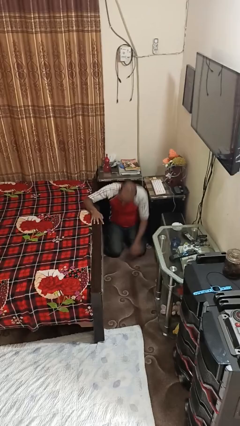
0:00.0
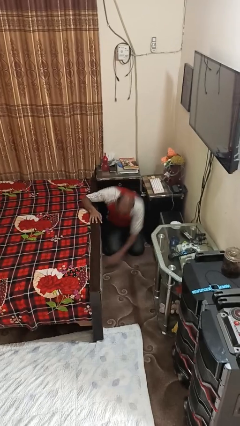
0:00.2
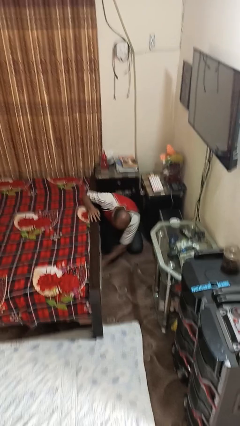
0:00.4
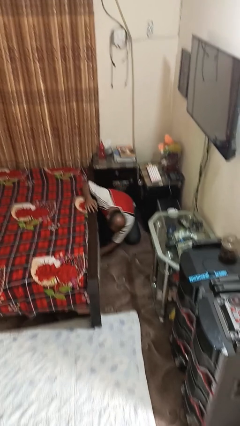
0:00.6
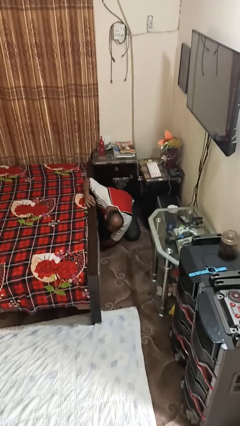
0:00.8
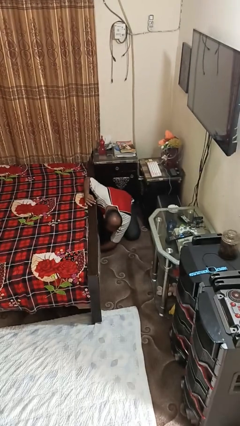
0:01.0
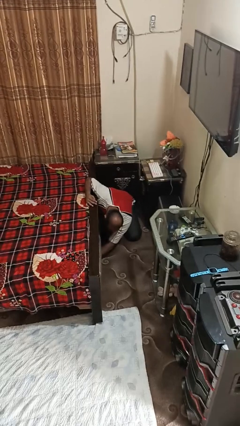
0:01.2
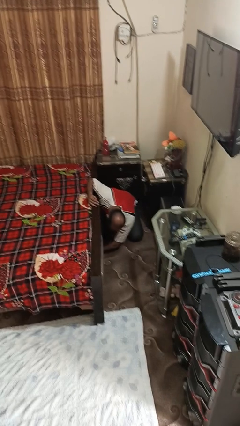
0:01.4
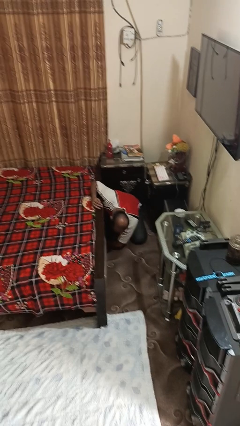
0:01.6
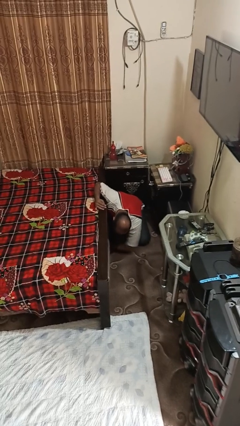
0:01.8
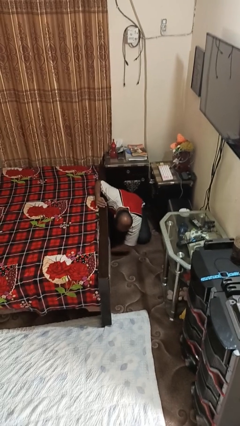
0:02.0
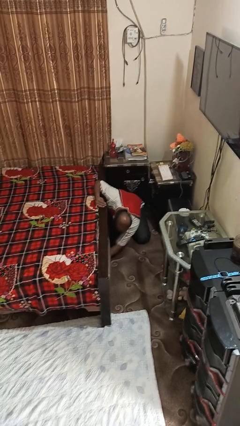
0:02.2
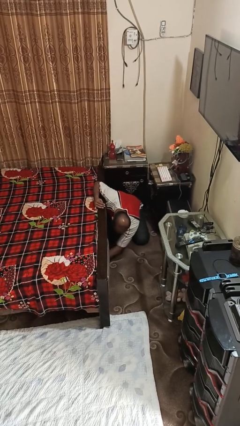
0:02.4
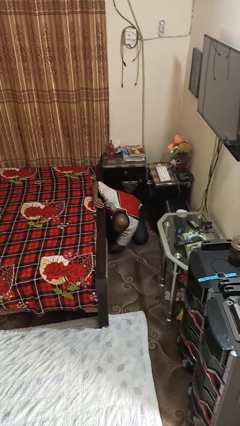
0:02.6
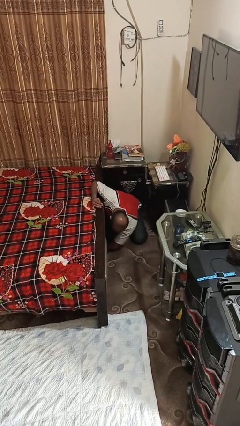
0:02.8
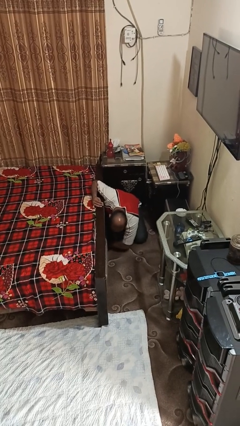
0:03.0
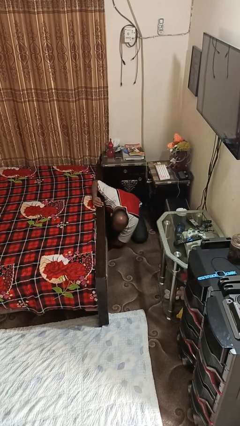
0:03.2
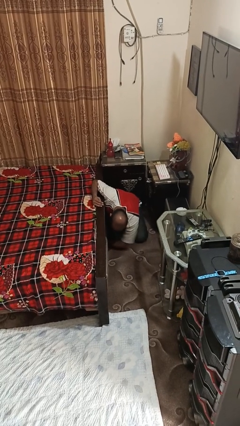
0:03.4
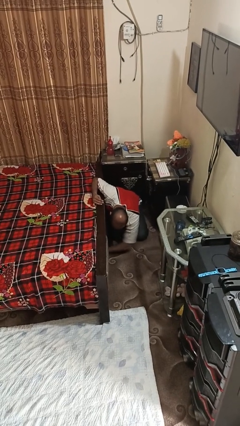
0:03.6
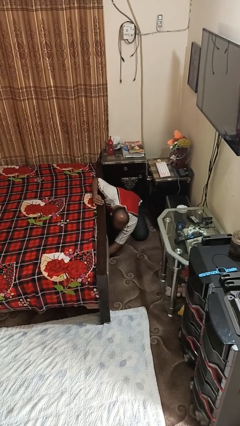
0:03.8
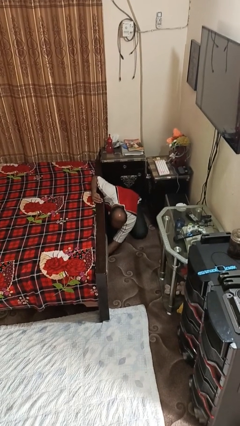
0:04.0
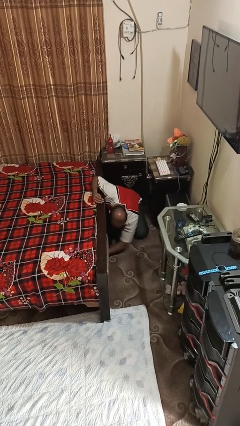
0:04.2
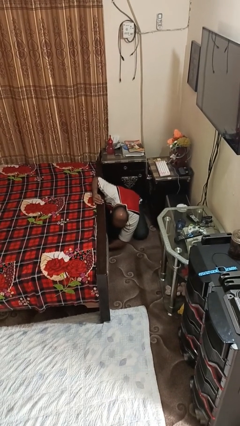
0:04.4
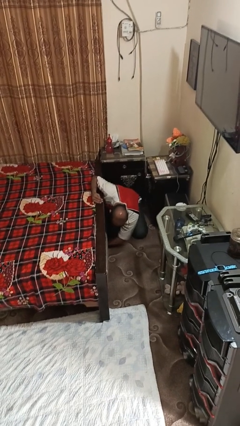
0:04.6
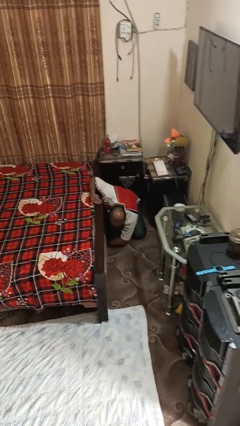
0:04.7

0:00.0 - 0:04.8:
person searches under bed

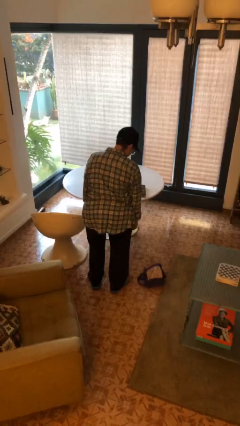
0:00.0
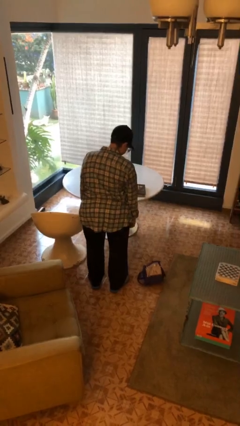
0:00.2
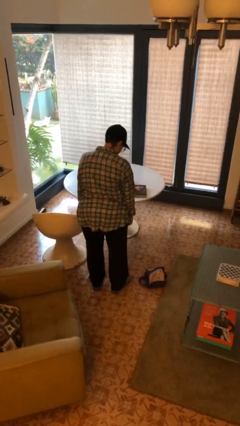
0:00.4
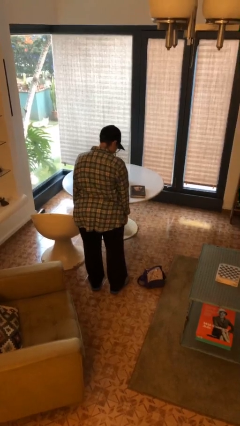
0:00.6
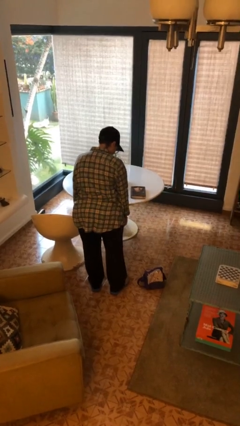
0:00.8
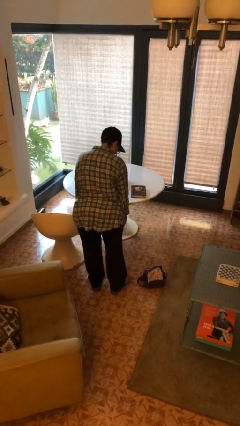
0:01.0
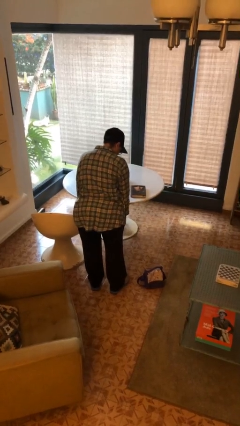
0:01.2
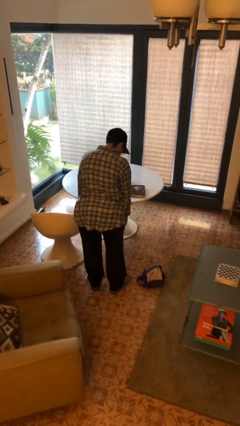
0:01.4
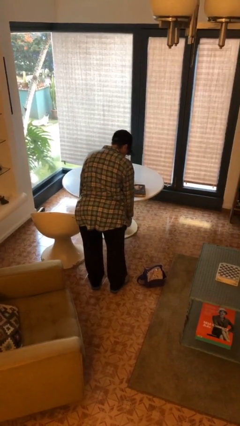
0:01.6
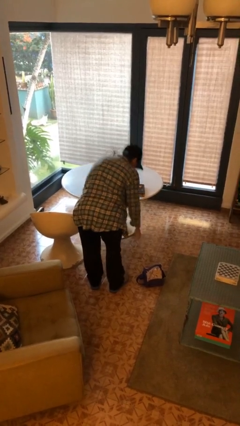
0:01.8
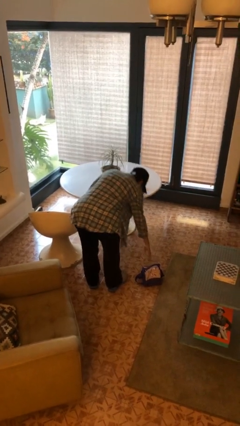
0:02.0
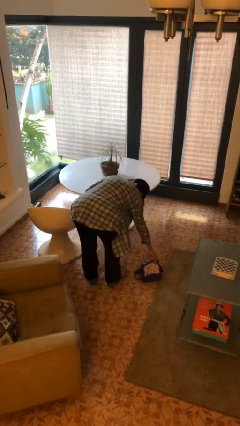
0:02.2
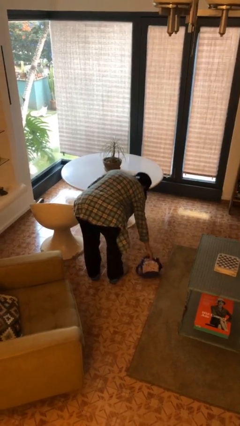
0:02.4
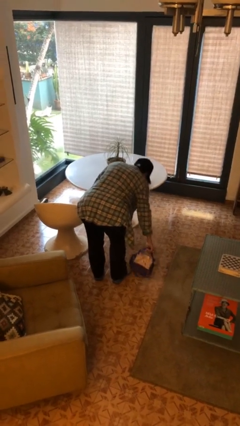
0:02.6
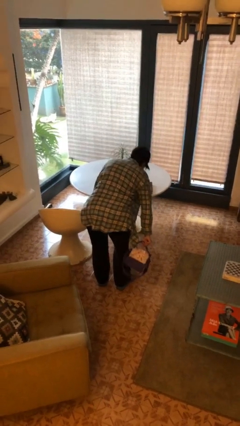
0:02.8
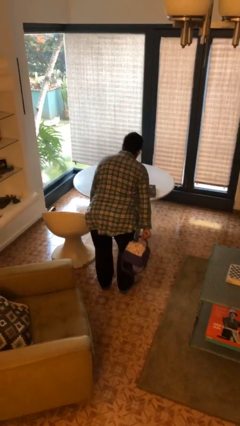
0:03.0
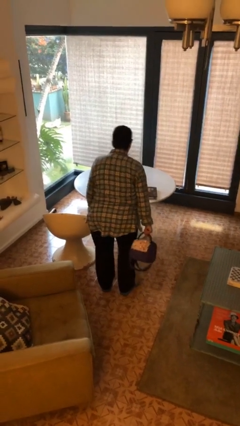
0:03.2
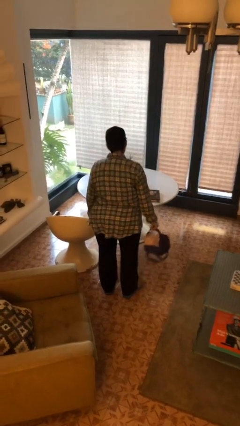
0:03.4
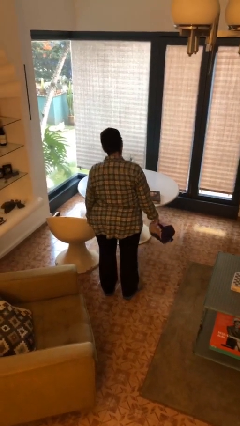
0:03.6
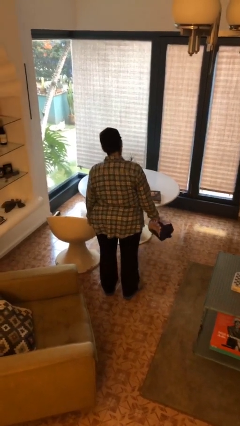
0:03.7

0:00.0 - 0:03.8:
person picks up object from floor

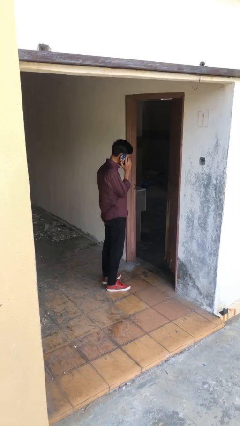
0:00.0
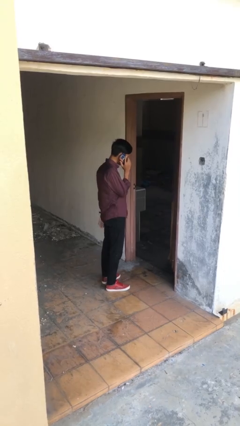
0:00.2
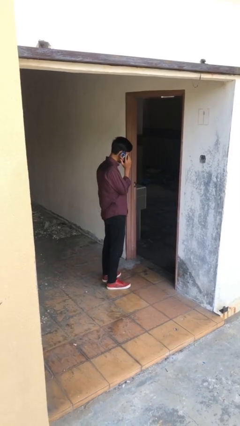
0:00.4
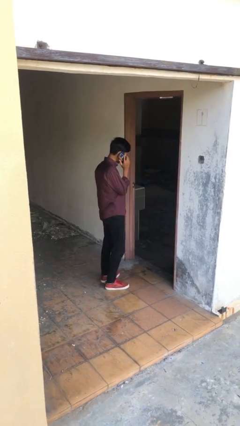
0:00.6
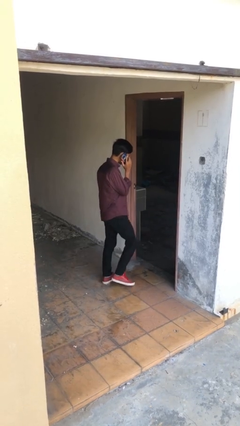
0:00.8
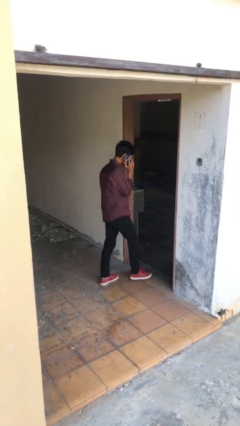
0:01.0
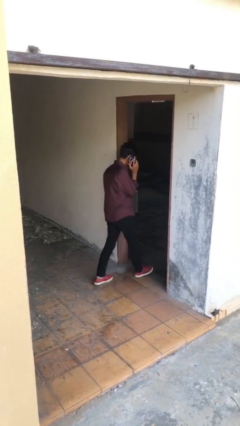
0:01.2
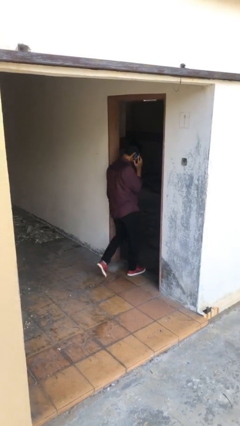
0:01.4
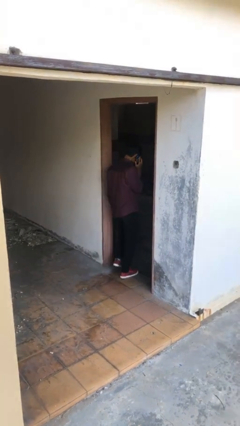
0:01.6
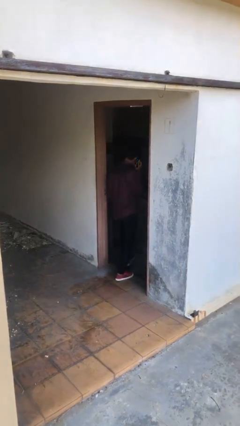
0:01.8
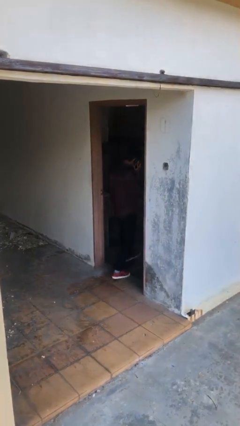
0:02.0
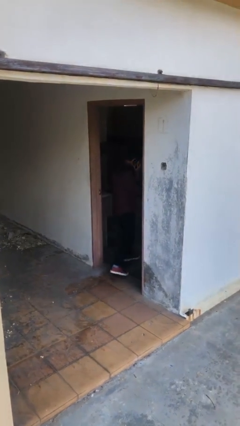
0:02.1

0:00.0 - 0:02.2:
person exits scene through structure

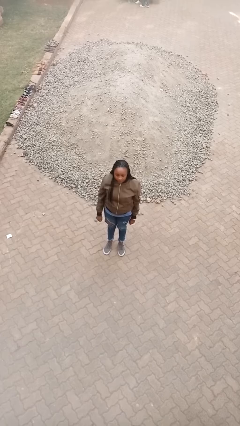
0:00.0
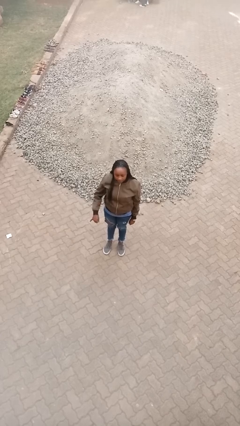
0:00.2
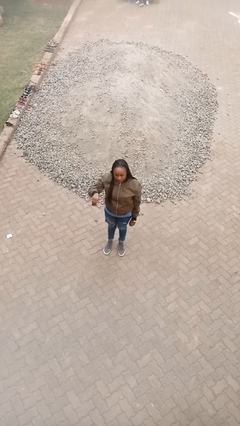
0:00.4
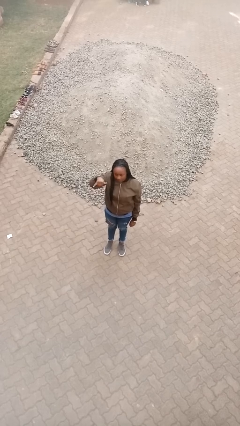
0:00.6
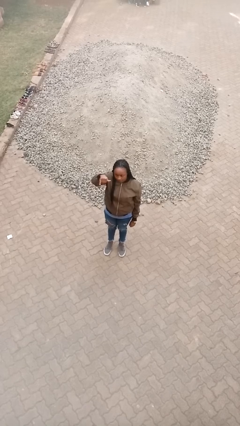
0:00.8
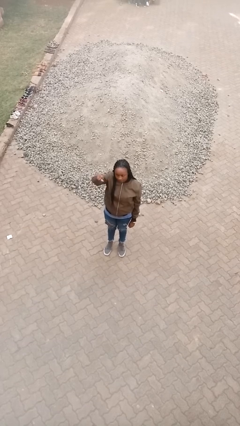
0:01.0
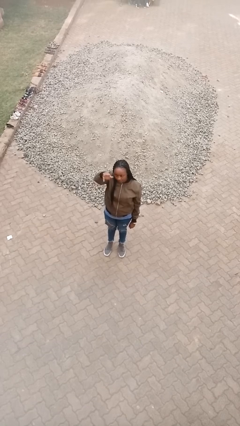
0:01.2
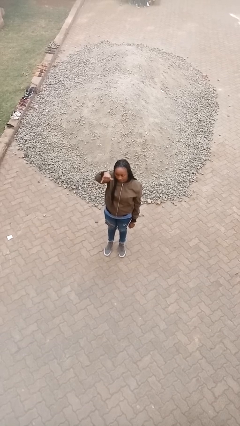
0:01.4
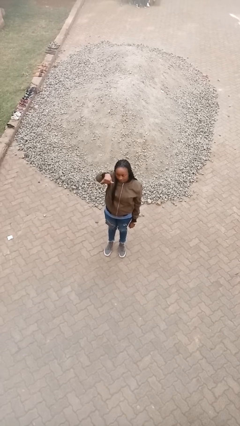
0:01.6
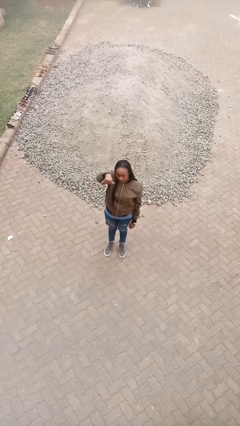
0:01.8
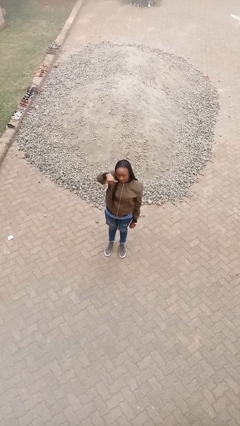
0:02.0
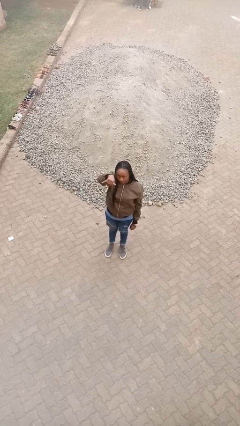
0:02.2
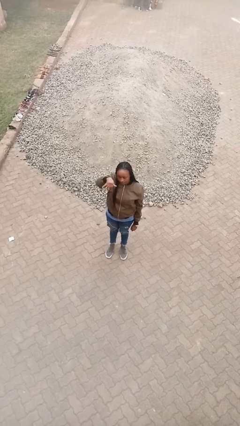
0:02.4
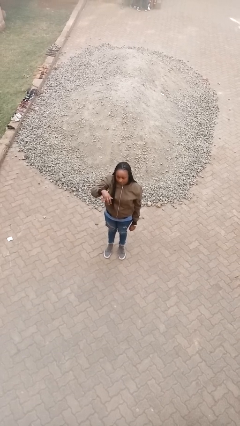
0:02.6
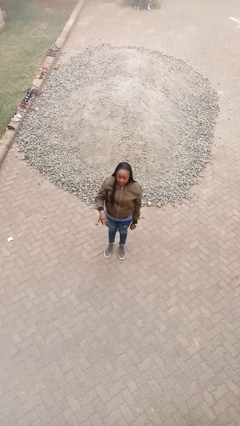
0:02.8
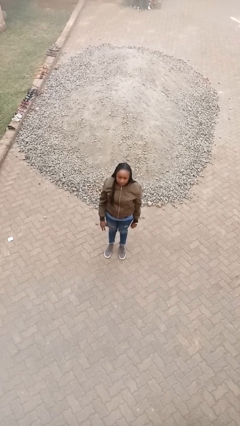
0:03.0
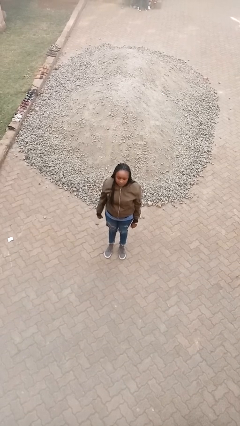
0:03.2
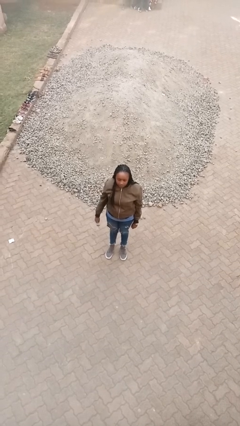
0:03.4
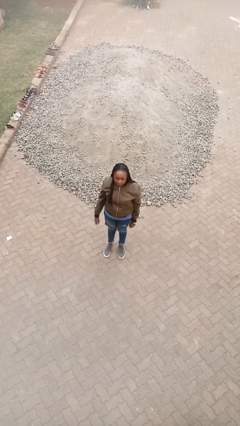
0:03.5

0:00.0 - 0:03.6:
person gestures hang loose

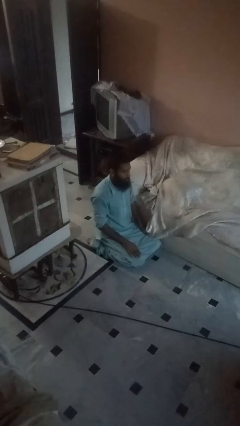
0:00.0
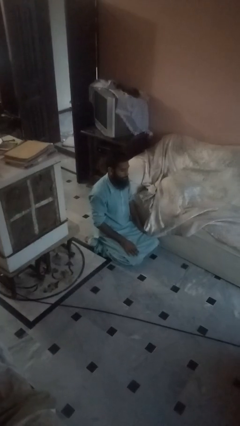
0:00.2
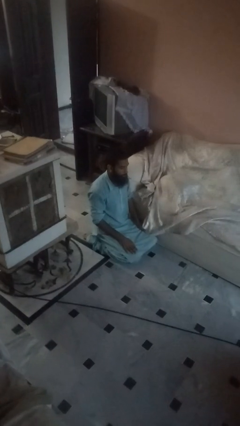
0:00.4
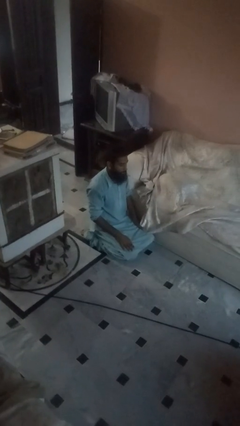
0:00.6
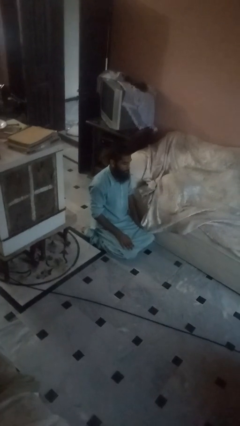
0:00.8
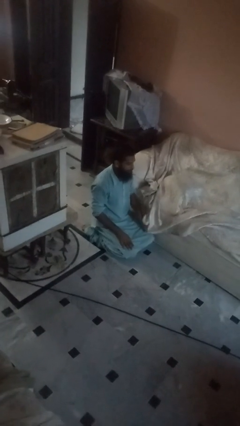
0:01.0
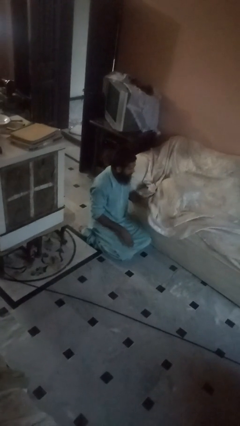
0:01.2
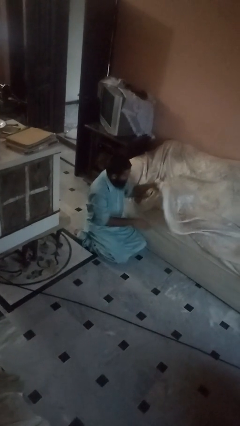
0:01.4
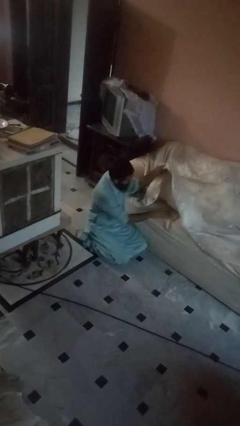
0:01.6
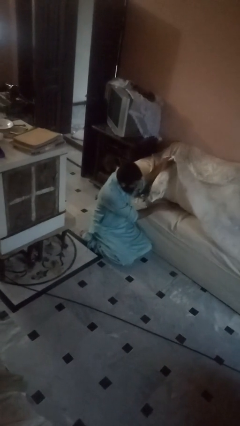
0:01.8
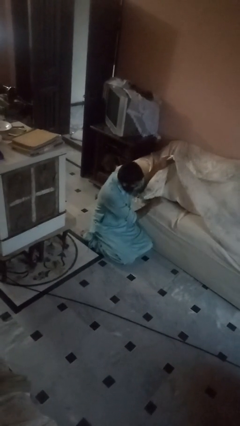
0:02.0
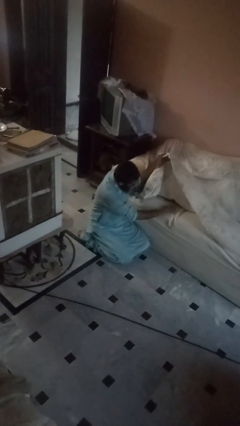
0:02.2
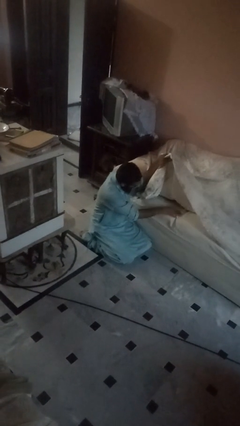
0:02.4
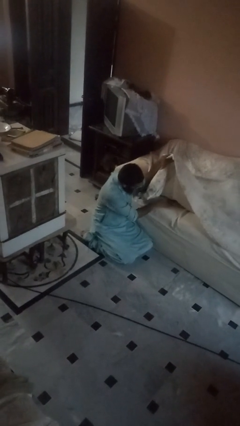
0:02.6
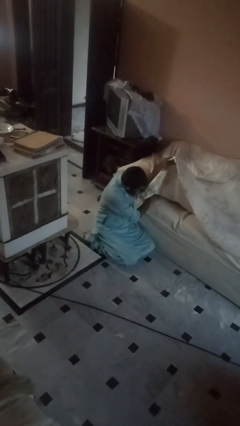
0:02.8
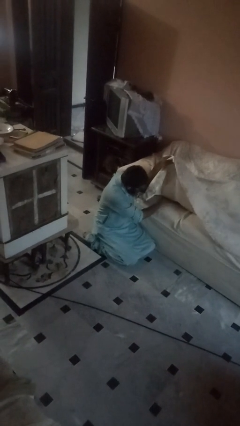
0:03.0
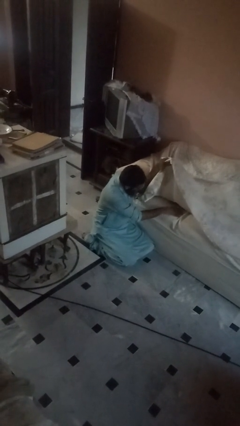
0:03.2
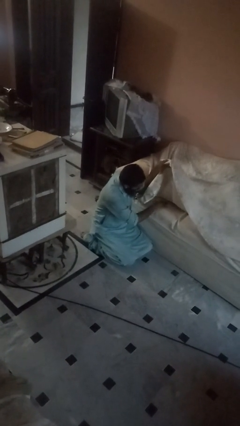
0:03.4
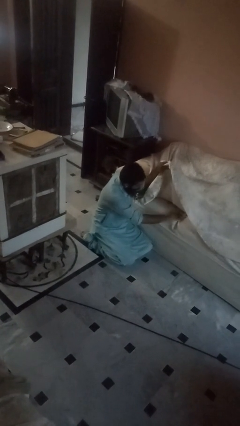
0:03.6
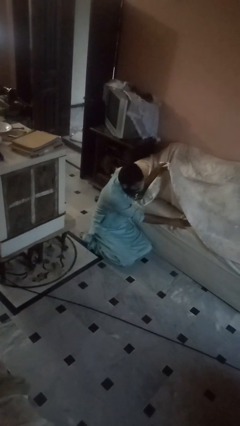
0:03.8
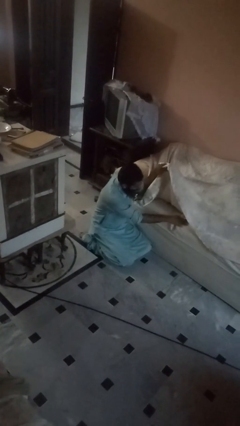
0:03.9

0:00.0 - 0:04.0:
person searches in couch
